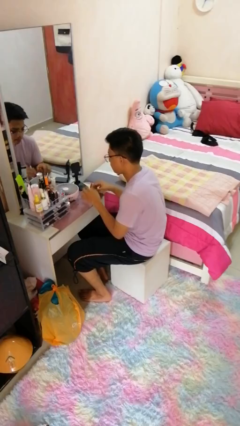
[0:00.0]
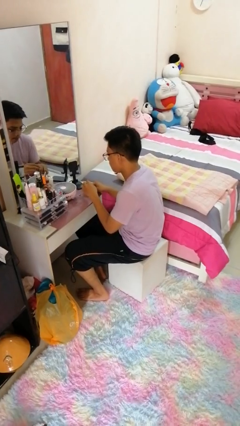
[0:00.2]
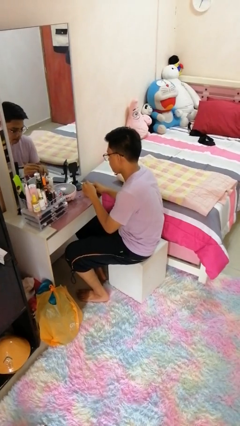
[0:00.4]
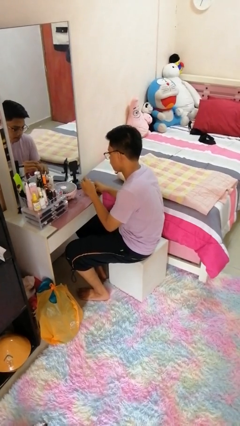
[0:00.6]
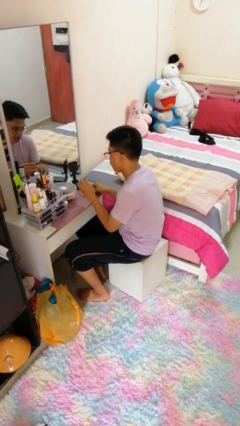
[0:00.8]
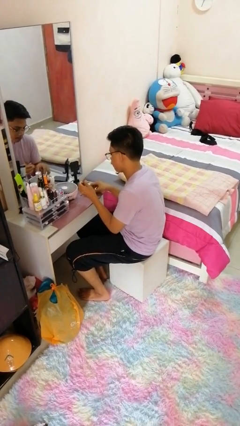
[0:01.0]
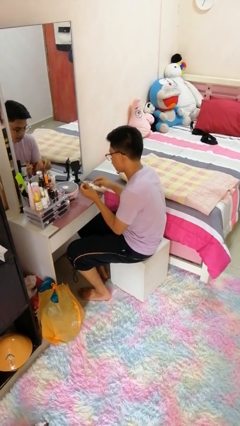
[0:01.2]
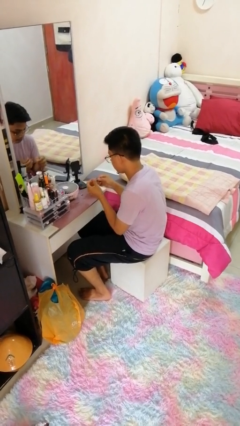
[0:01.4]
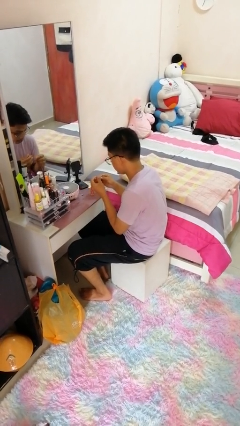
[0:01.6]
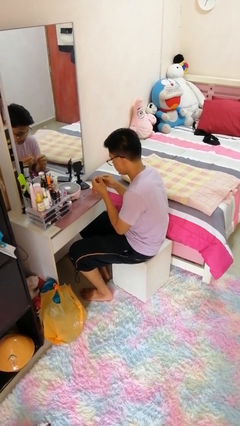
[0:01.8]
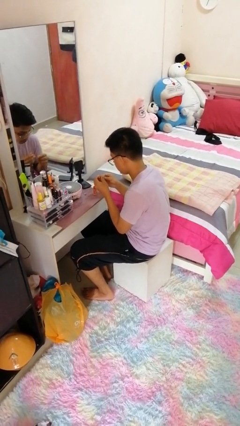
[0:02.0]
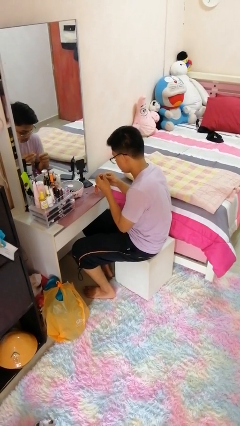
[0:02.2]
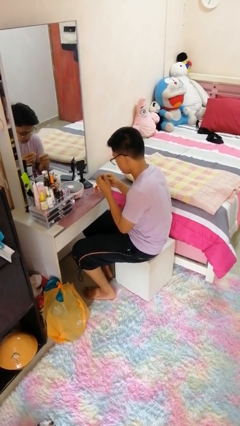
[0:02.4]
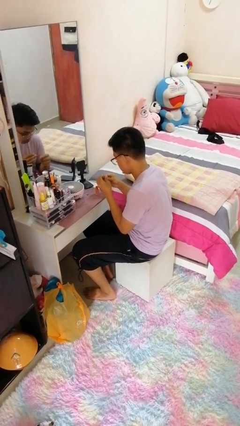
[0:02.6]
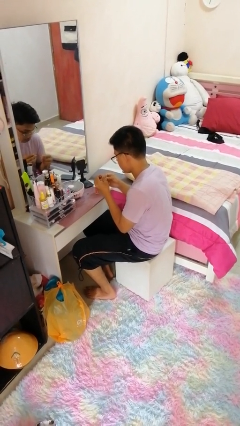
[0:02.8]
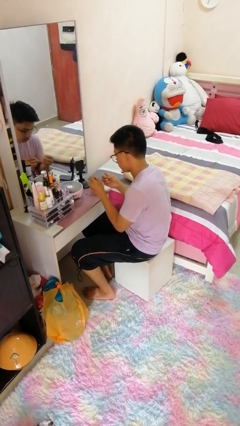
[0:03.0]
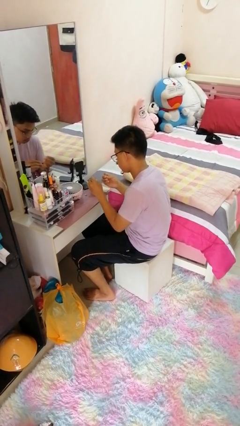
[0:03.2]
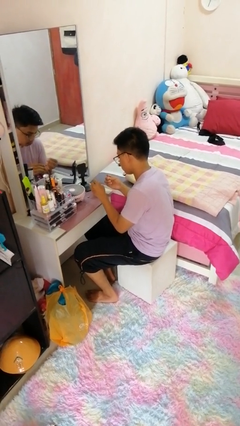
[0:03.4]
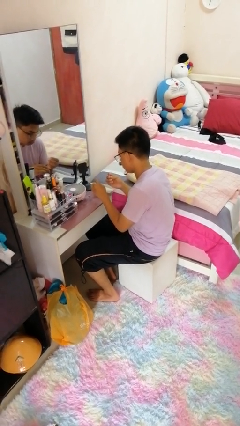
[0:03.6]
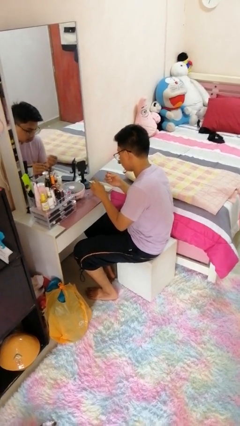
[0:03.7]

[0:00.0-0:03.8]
person paints fingernails

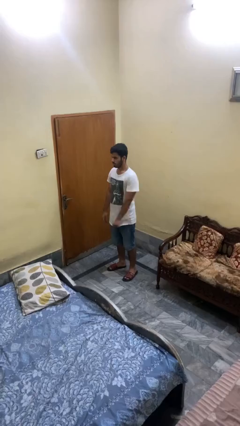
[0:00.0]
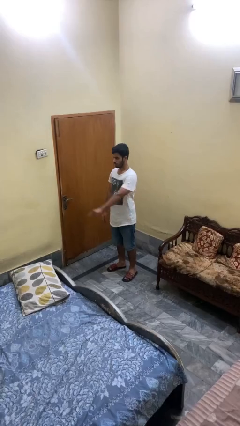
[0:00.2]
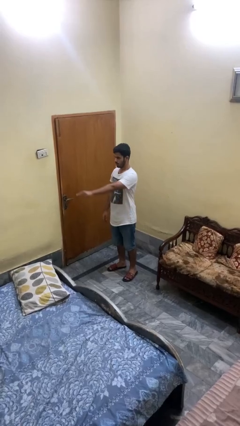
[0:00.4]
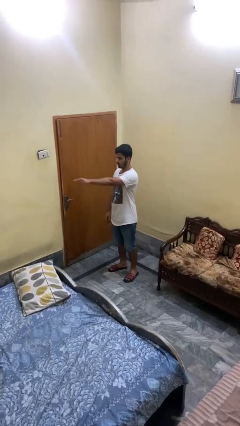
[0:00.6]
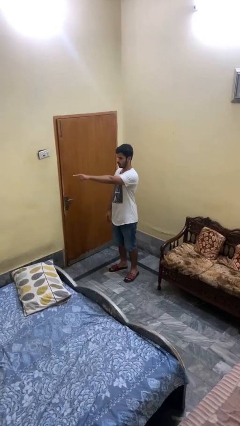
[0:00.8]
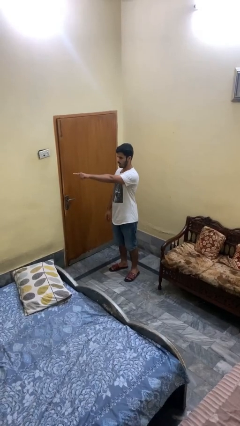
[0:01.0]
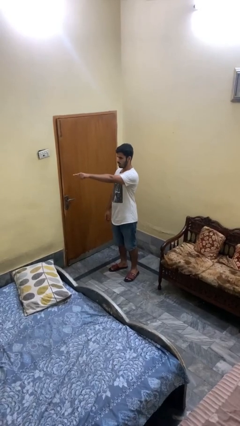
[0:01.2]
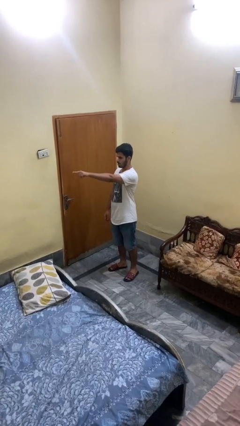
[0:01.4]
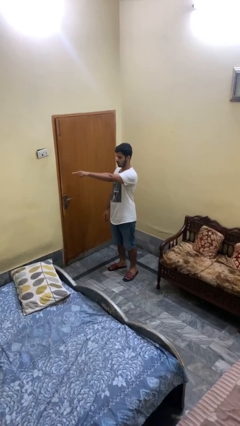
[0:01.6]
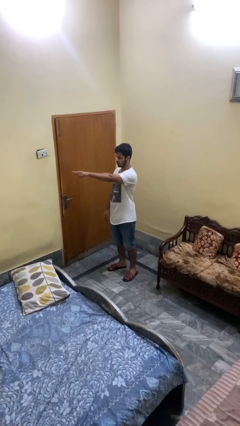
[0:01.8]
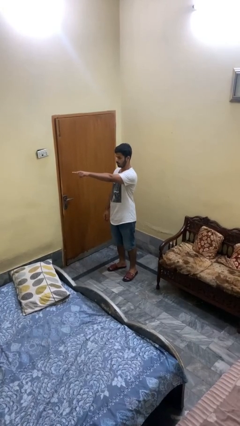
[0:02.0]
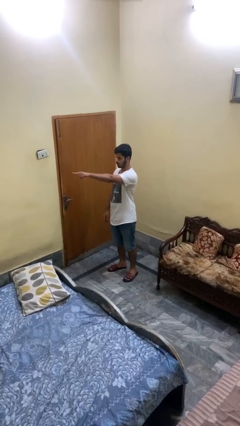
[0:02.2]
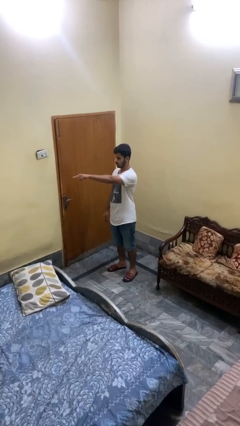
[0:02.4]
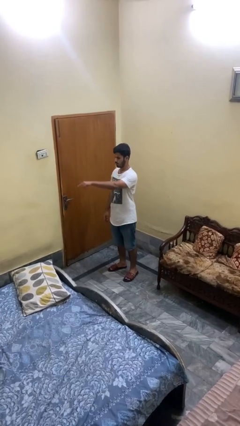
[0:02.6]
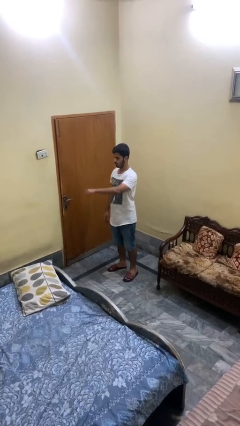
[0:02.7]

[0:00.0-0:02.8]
person points at person

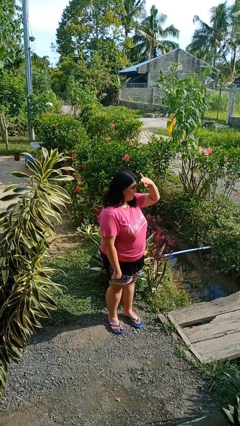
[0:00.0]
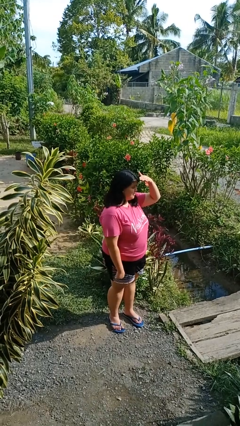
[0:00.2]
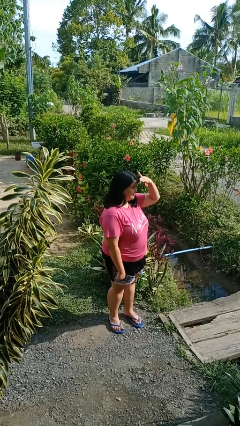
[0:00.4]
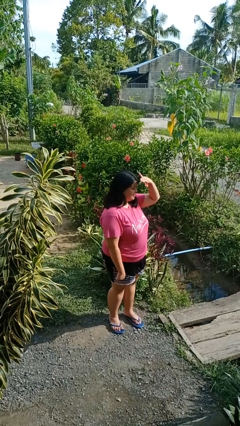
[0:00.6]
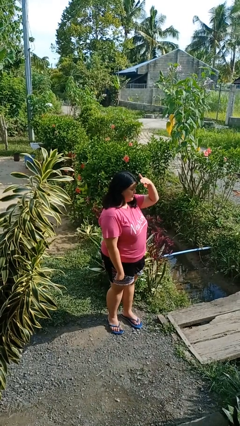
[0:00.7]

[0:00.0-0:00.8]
person shades eyes

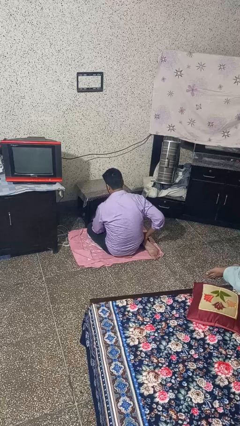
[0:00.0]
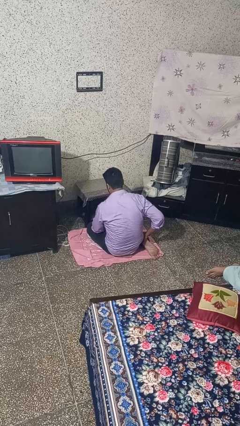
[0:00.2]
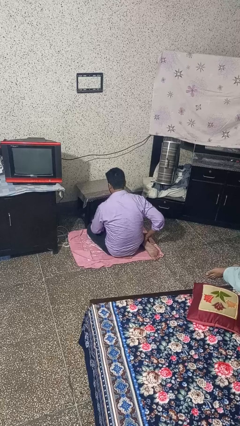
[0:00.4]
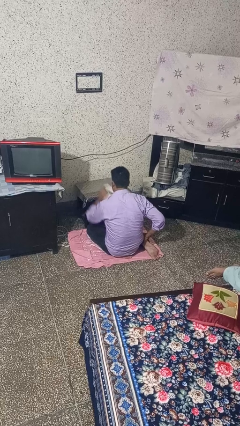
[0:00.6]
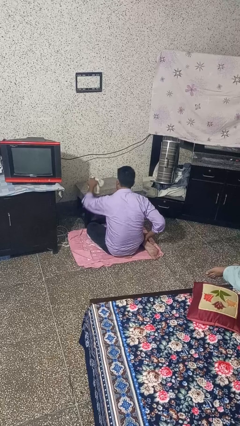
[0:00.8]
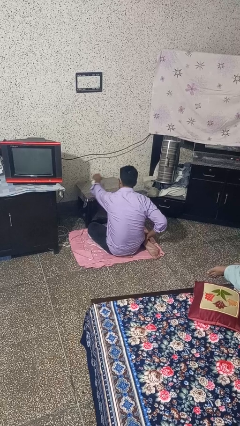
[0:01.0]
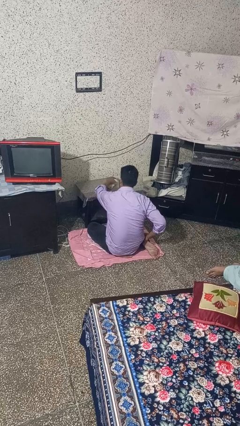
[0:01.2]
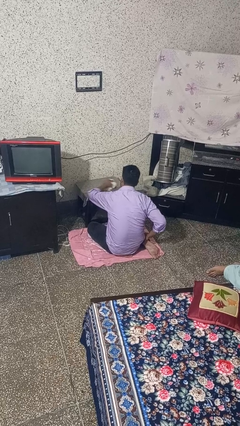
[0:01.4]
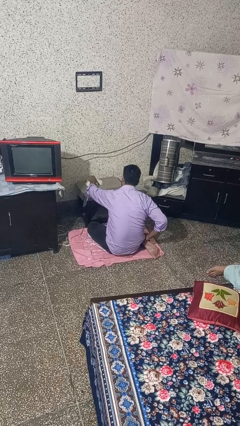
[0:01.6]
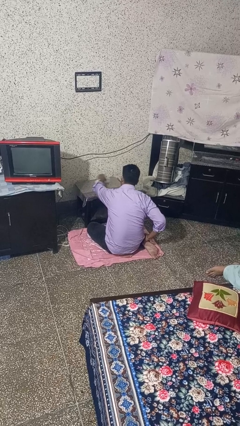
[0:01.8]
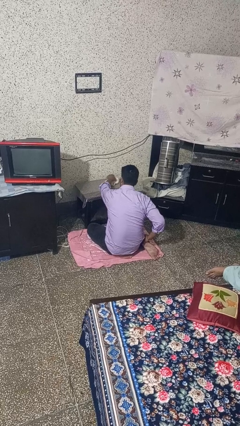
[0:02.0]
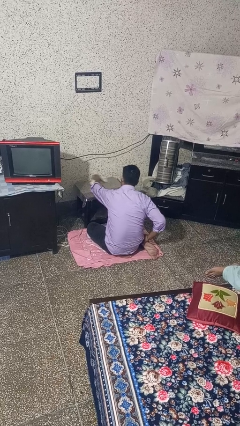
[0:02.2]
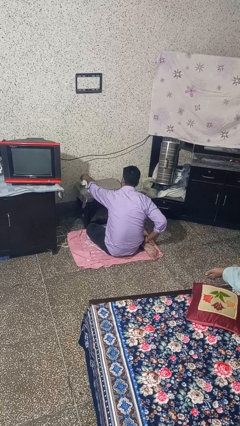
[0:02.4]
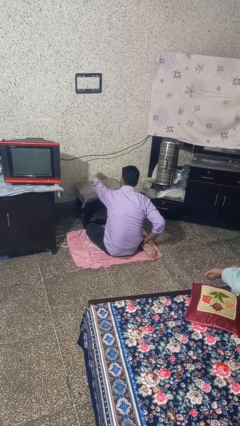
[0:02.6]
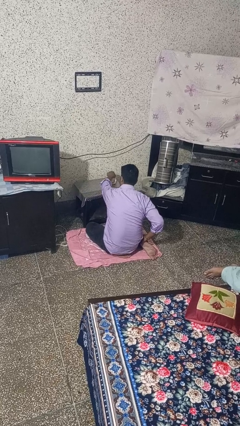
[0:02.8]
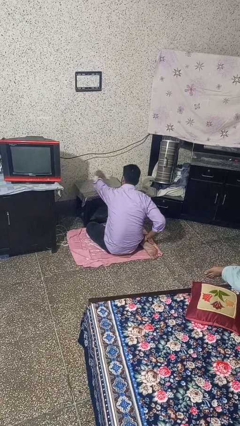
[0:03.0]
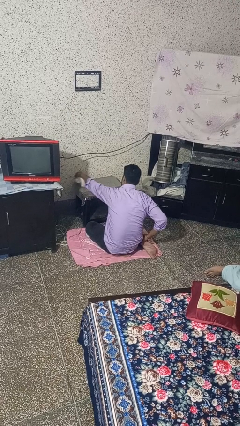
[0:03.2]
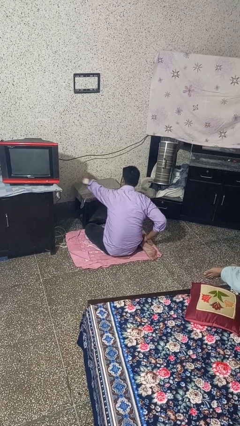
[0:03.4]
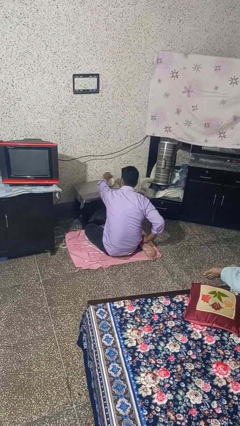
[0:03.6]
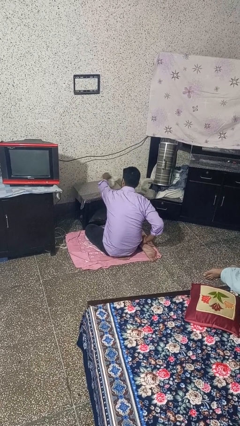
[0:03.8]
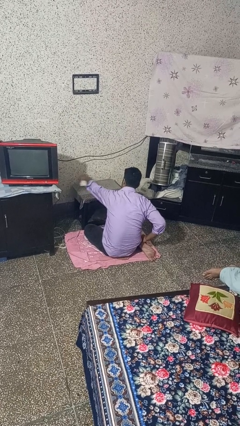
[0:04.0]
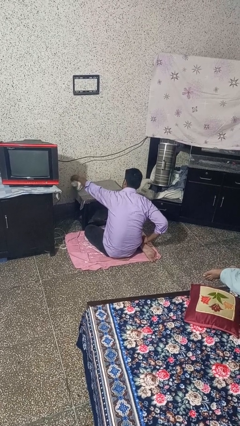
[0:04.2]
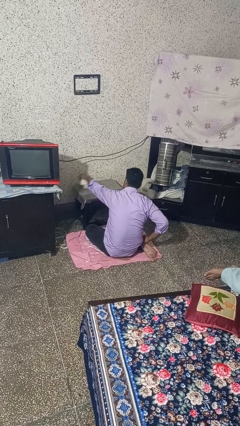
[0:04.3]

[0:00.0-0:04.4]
person cleans table with rag

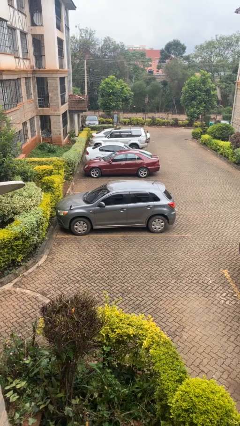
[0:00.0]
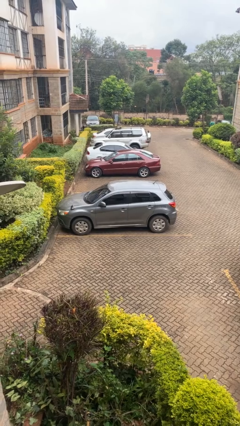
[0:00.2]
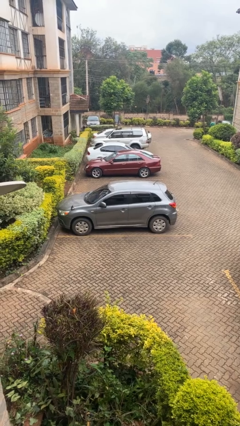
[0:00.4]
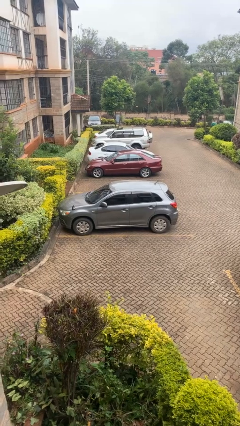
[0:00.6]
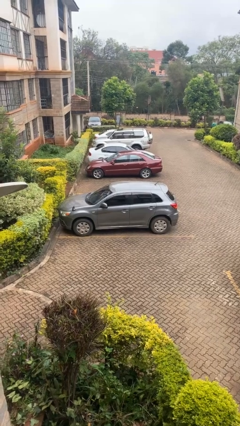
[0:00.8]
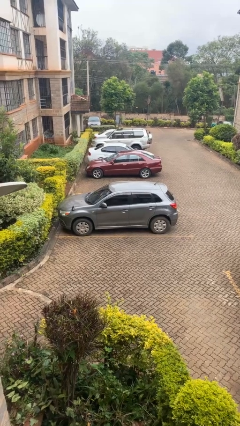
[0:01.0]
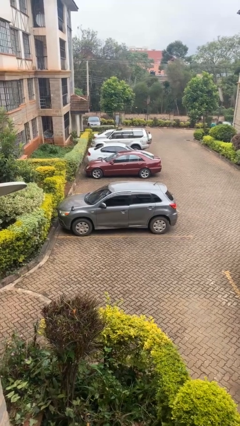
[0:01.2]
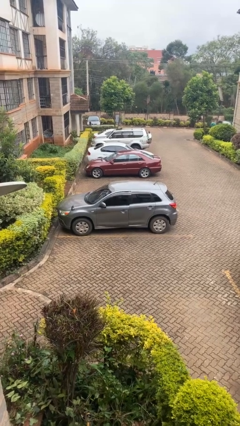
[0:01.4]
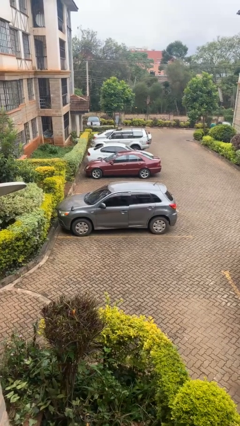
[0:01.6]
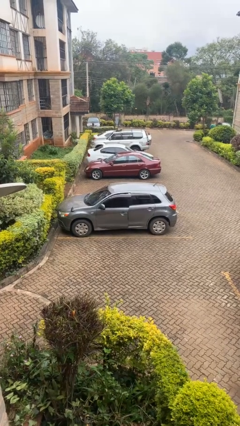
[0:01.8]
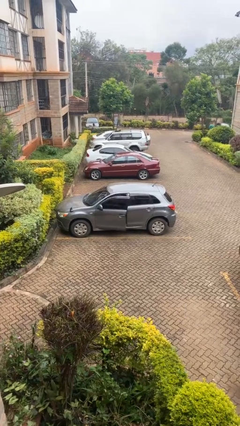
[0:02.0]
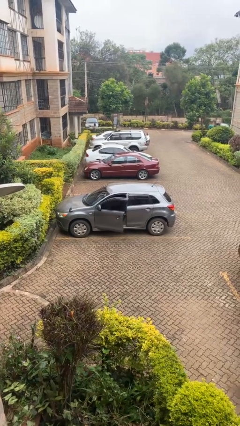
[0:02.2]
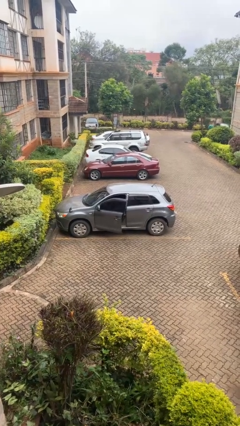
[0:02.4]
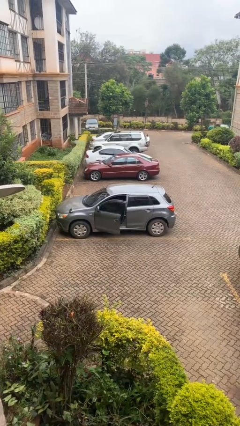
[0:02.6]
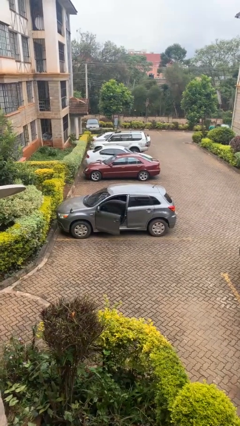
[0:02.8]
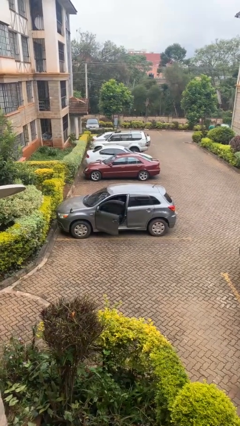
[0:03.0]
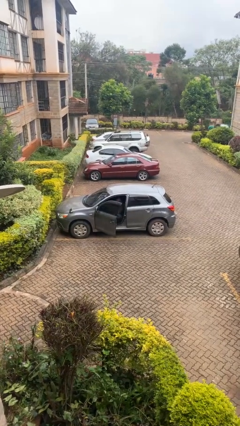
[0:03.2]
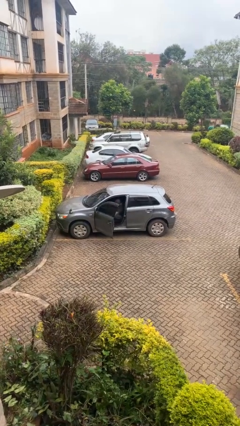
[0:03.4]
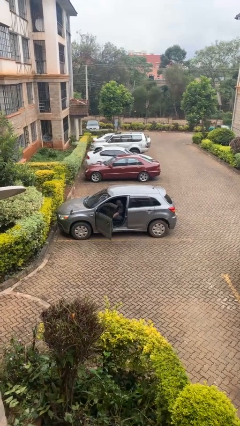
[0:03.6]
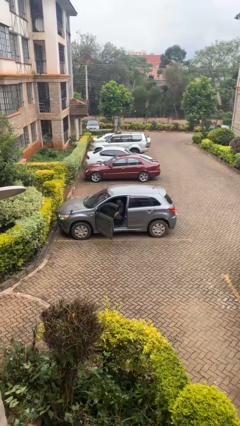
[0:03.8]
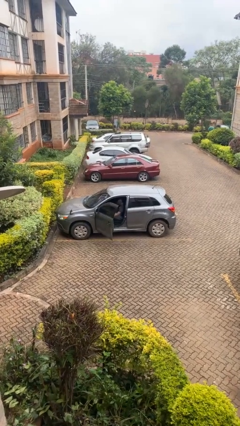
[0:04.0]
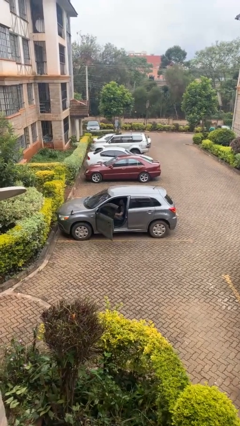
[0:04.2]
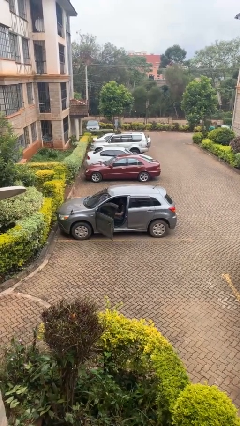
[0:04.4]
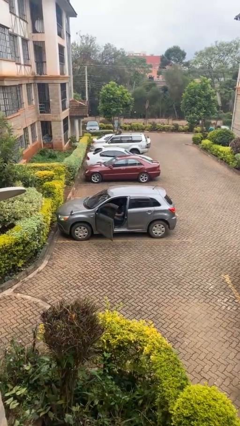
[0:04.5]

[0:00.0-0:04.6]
person opens car door

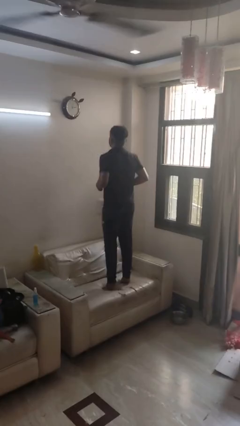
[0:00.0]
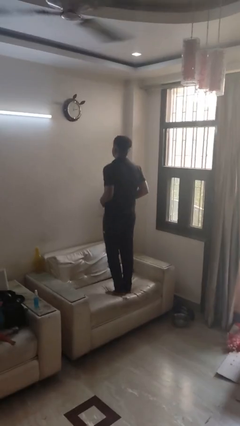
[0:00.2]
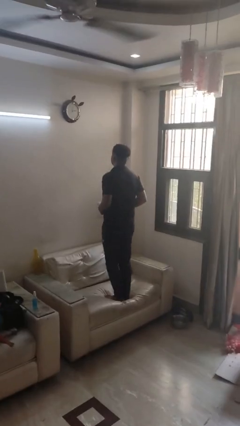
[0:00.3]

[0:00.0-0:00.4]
person jumps on couch
